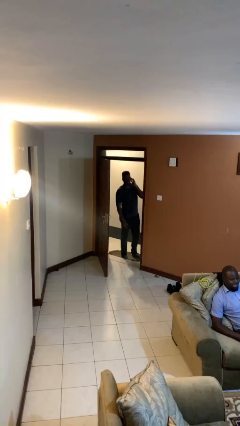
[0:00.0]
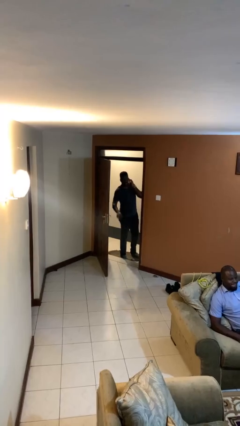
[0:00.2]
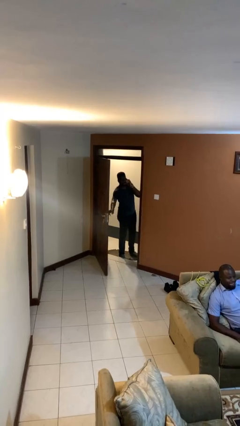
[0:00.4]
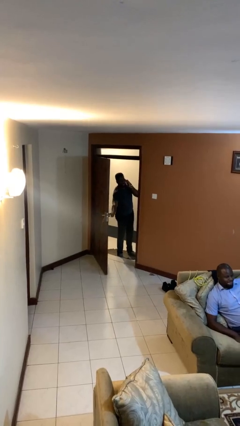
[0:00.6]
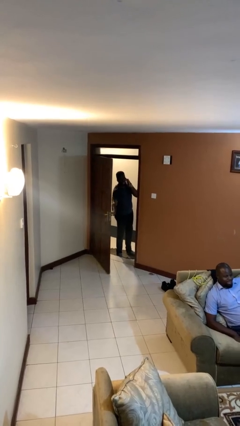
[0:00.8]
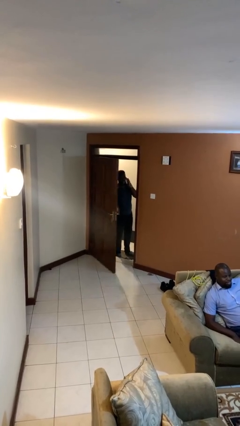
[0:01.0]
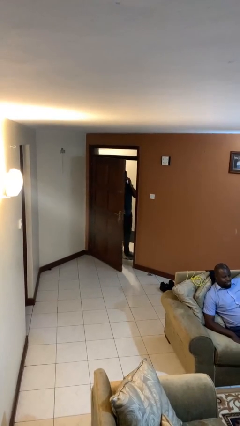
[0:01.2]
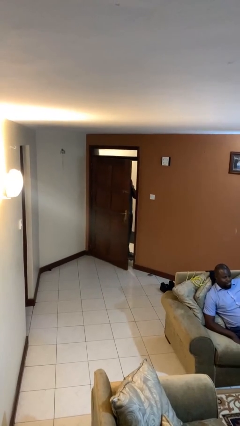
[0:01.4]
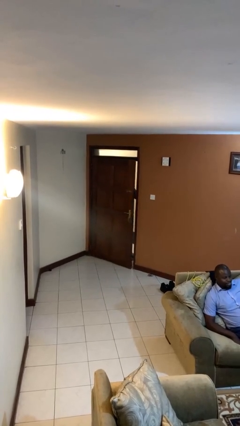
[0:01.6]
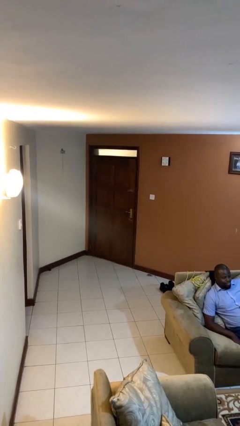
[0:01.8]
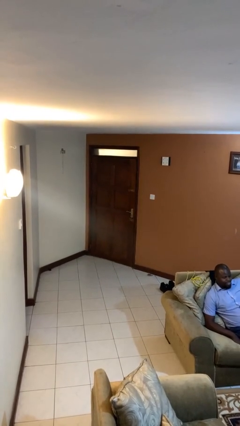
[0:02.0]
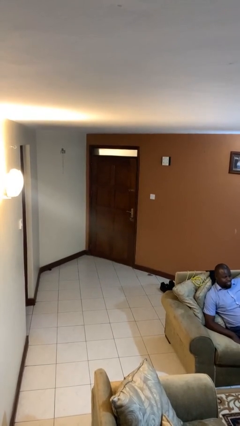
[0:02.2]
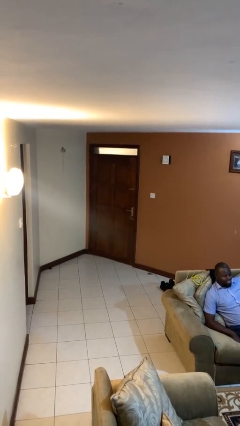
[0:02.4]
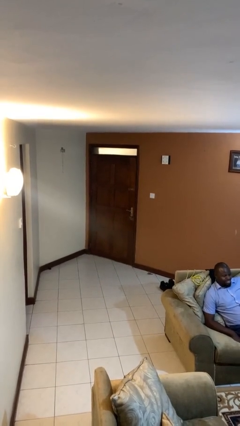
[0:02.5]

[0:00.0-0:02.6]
person closes facility door

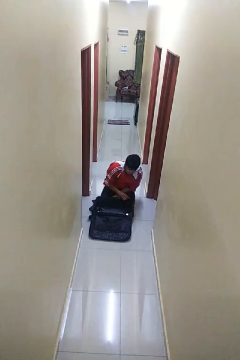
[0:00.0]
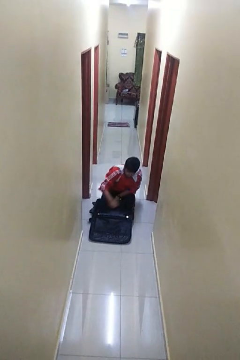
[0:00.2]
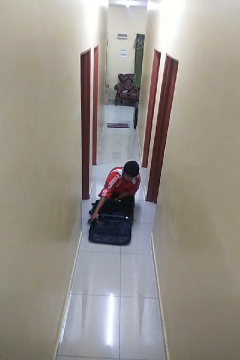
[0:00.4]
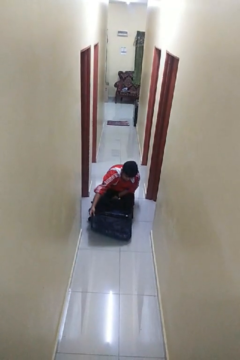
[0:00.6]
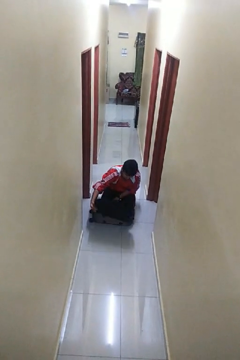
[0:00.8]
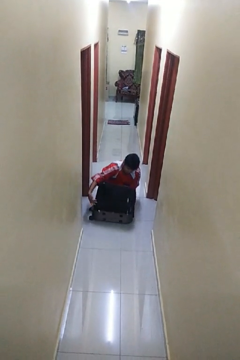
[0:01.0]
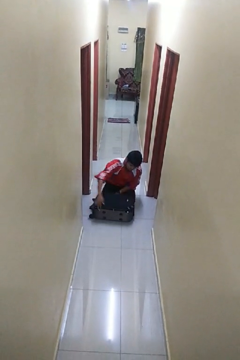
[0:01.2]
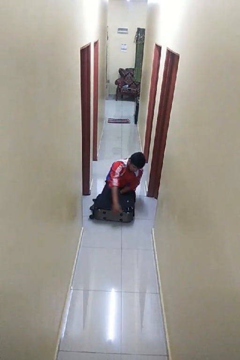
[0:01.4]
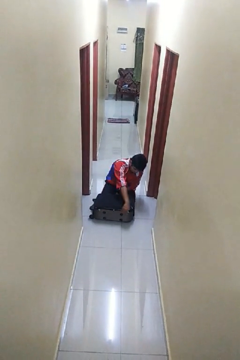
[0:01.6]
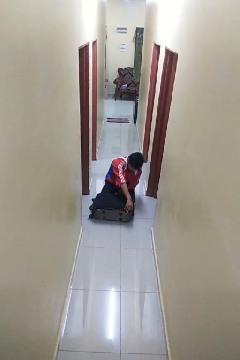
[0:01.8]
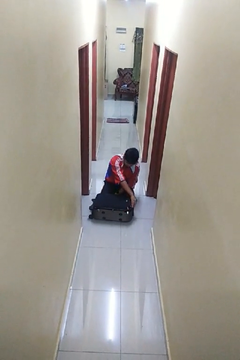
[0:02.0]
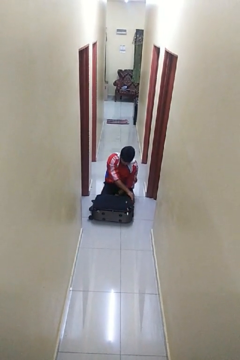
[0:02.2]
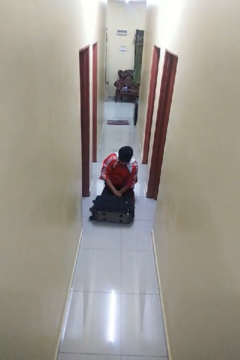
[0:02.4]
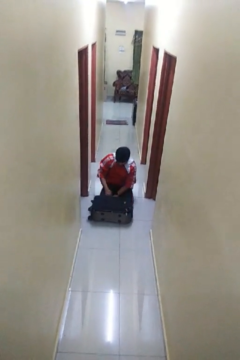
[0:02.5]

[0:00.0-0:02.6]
person closes suitcase

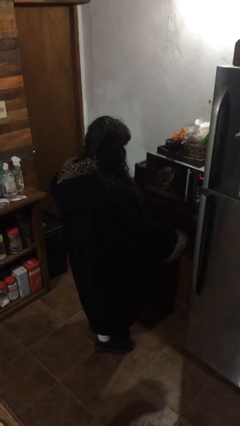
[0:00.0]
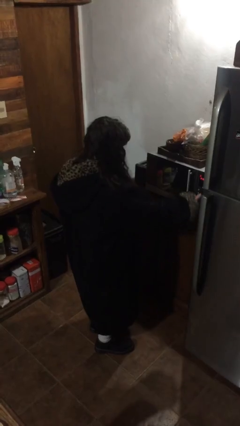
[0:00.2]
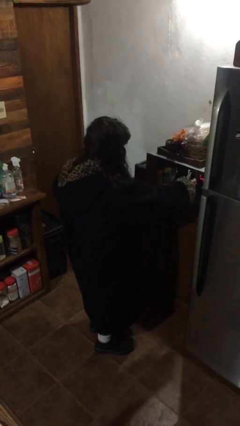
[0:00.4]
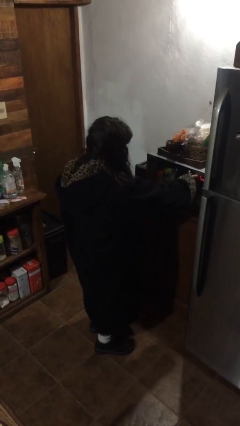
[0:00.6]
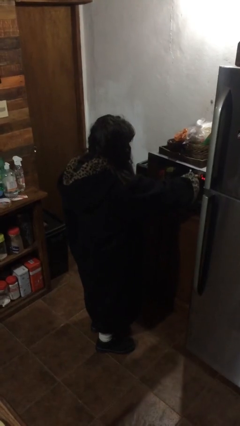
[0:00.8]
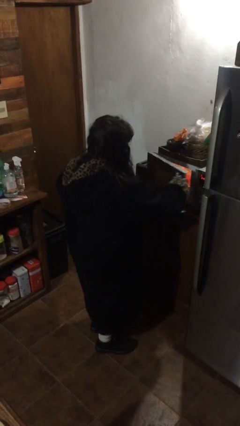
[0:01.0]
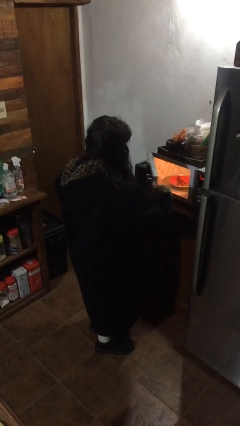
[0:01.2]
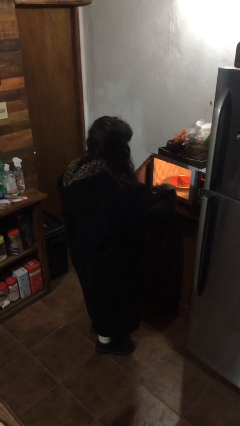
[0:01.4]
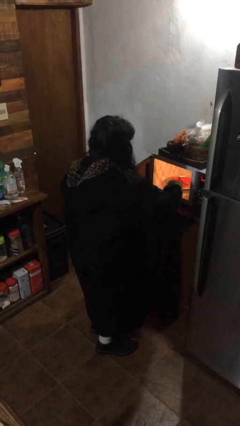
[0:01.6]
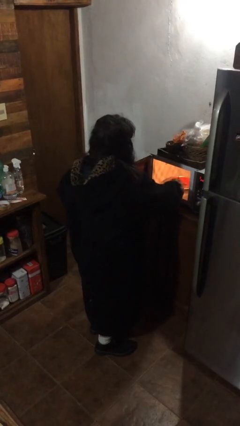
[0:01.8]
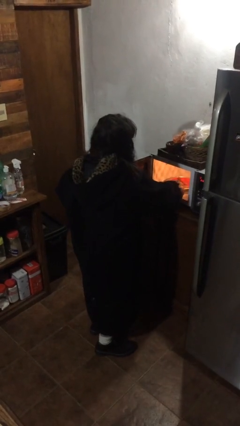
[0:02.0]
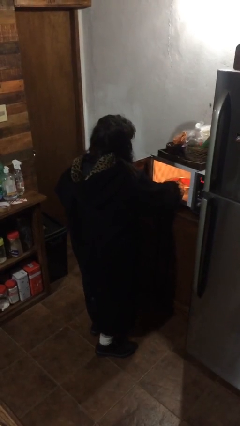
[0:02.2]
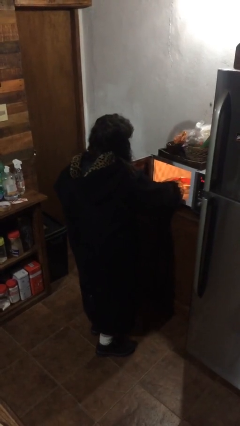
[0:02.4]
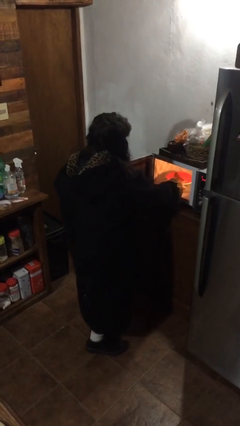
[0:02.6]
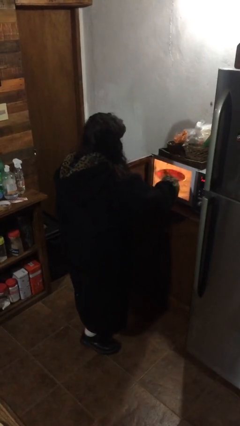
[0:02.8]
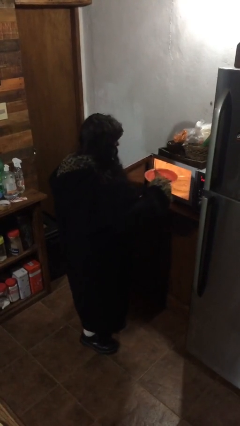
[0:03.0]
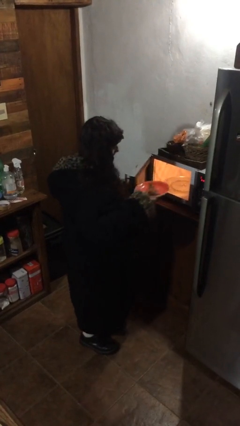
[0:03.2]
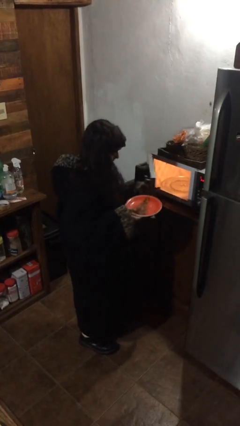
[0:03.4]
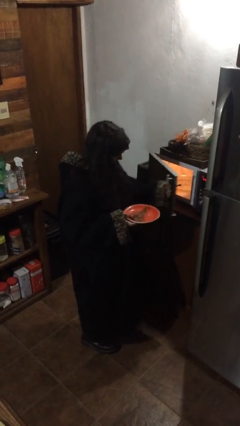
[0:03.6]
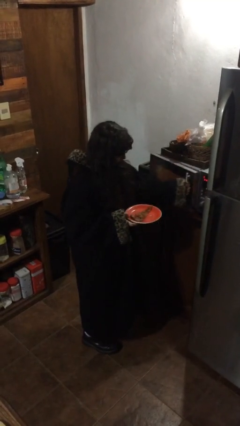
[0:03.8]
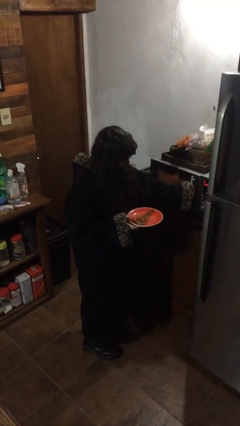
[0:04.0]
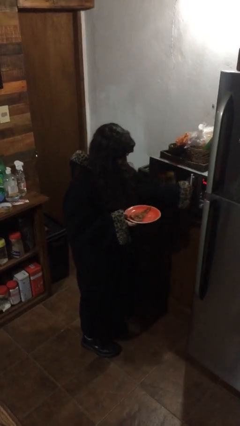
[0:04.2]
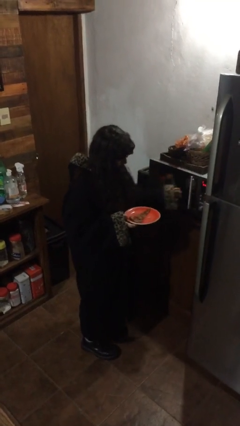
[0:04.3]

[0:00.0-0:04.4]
person takes object from microwave

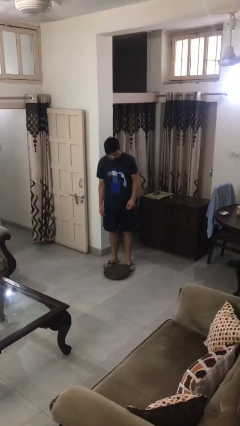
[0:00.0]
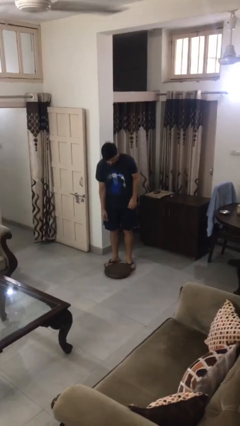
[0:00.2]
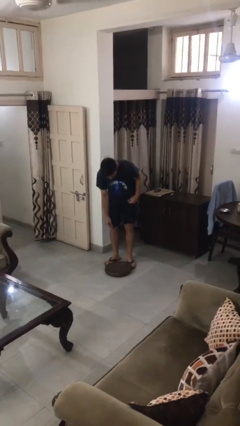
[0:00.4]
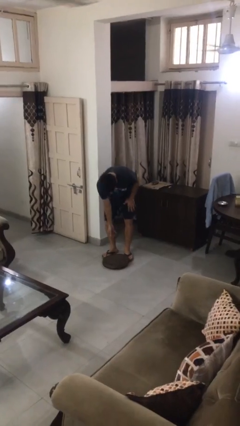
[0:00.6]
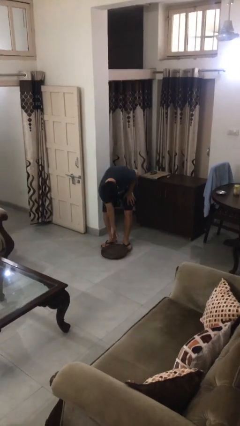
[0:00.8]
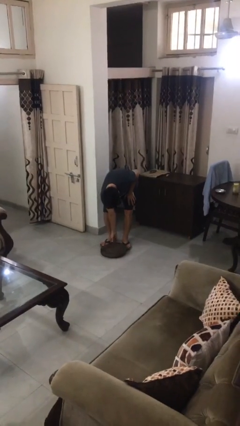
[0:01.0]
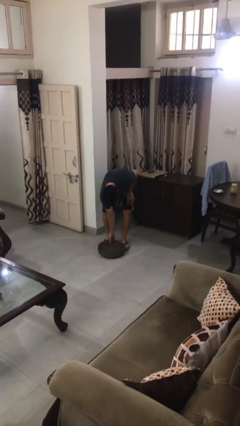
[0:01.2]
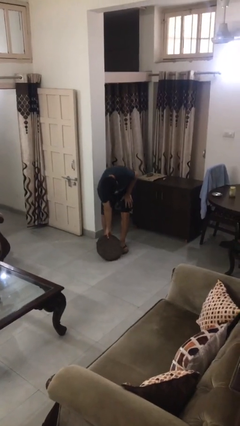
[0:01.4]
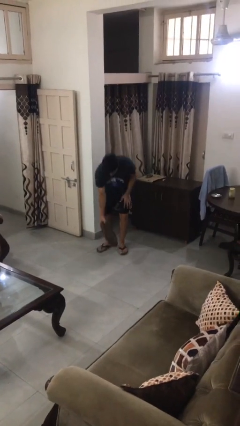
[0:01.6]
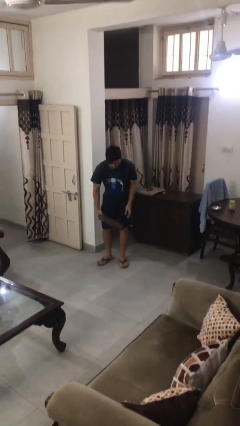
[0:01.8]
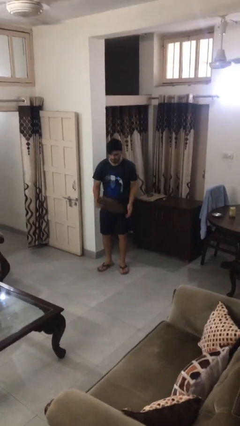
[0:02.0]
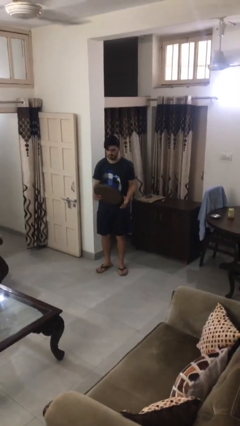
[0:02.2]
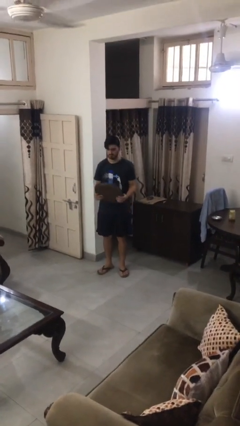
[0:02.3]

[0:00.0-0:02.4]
person picks up object from floor

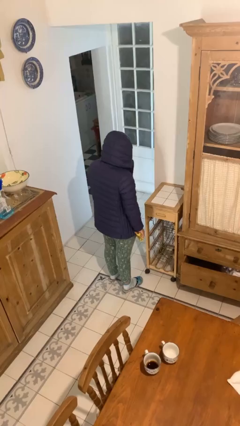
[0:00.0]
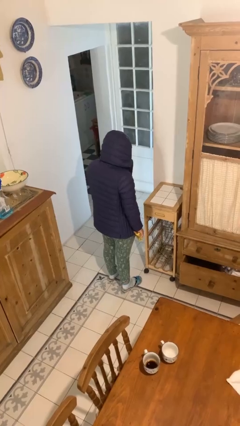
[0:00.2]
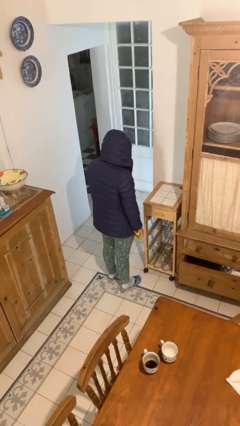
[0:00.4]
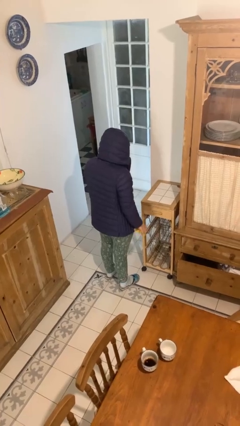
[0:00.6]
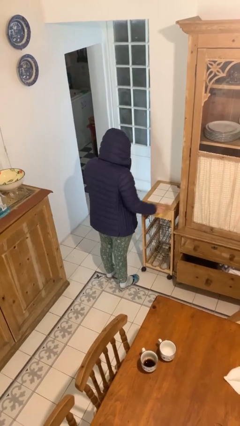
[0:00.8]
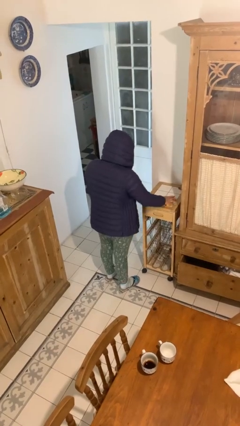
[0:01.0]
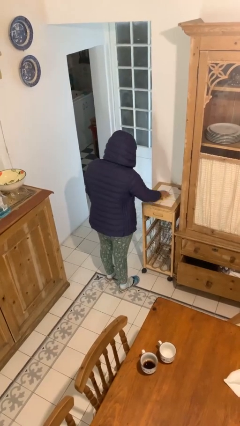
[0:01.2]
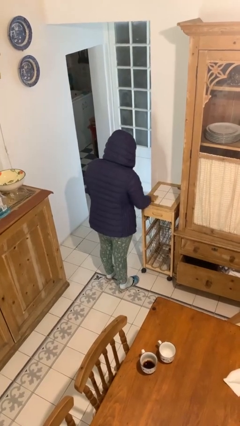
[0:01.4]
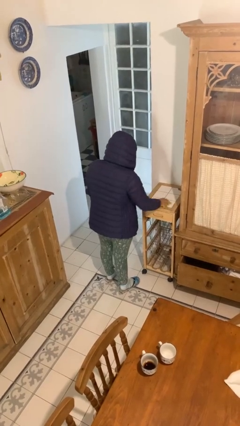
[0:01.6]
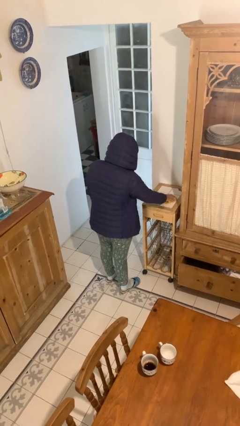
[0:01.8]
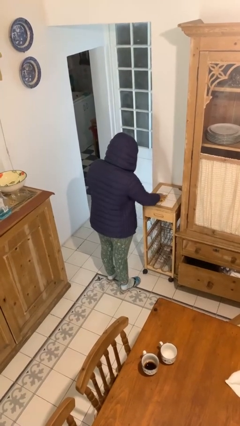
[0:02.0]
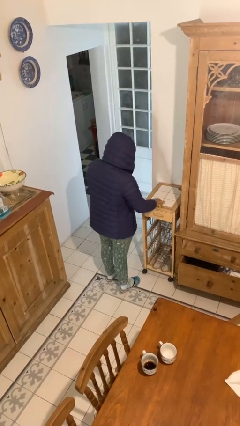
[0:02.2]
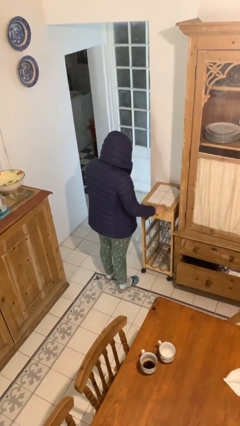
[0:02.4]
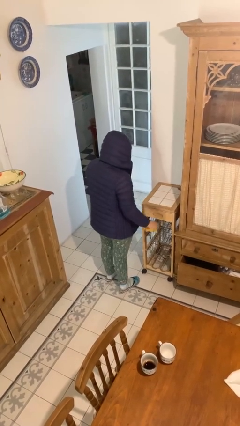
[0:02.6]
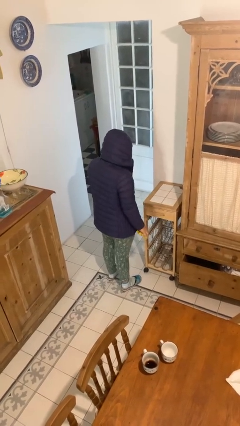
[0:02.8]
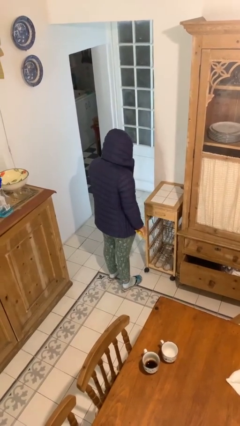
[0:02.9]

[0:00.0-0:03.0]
person cleans table with rag

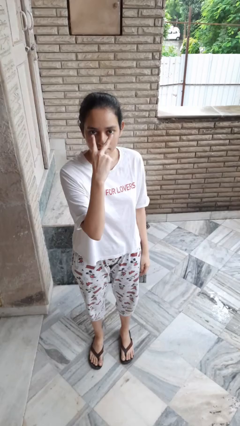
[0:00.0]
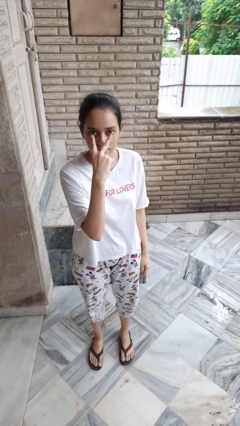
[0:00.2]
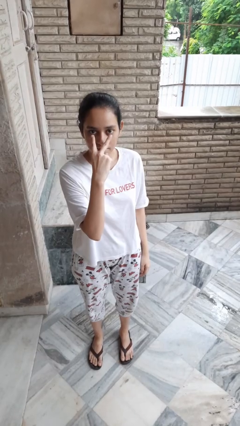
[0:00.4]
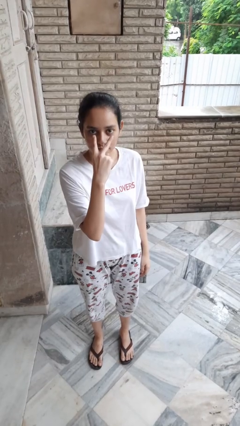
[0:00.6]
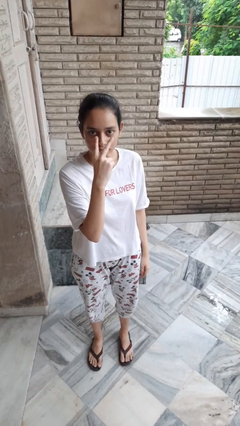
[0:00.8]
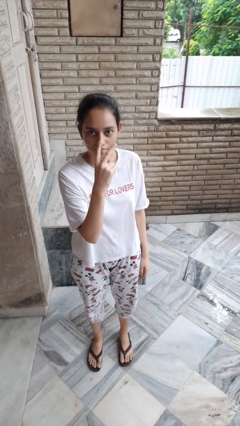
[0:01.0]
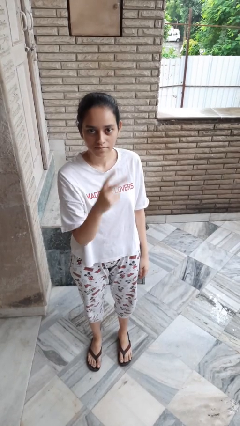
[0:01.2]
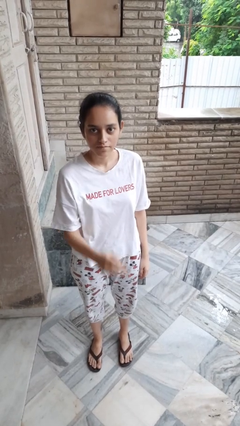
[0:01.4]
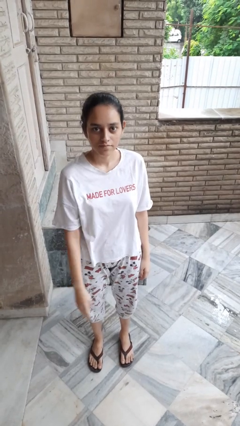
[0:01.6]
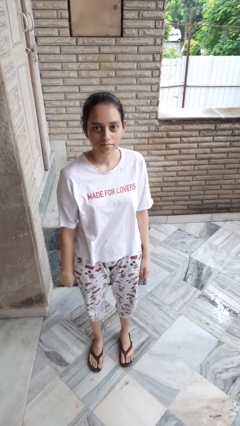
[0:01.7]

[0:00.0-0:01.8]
person gestures watch closely

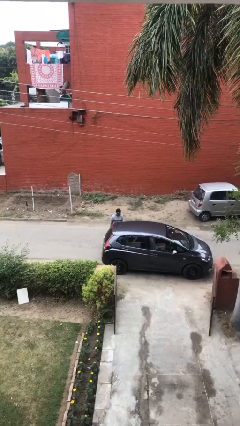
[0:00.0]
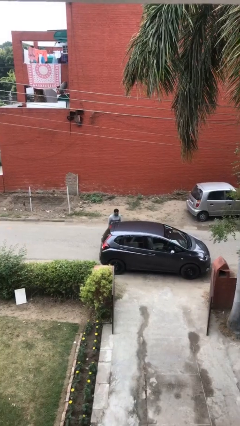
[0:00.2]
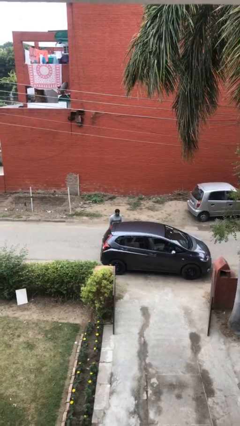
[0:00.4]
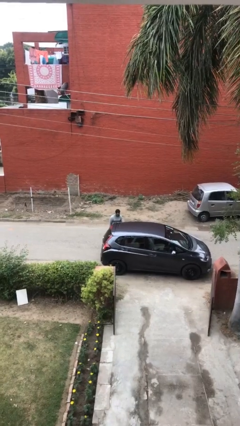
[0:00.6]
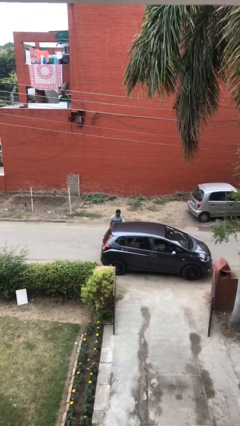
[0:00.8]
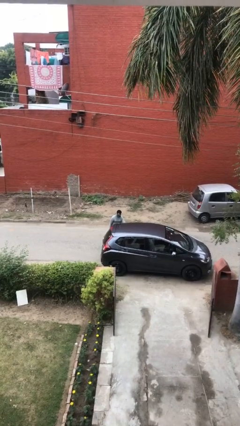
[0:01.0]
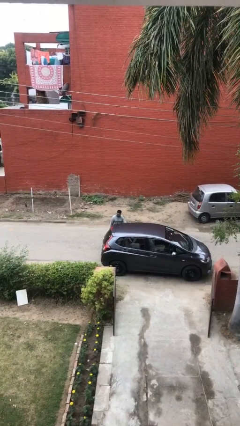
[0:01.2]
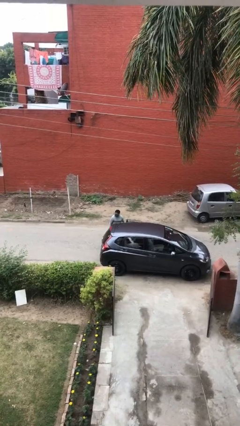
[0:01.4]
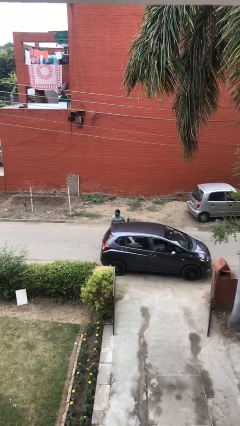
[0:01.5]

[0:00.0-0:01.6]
person opens car door
